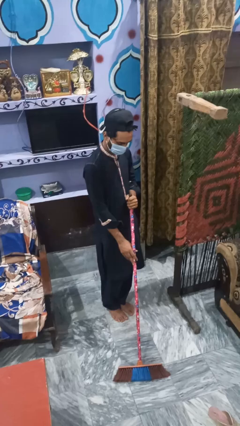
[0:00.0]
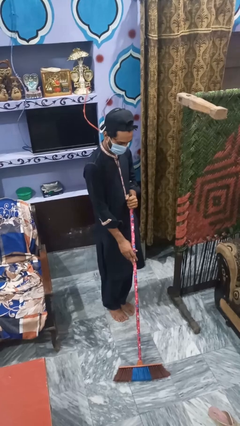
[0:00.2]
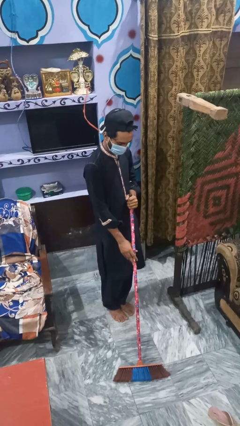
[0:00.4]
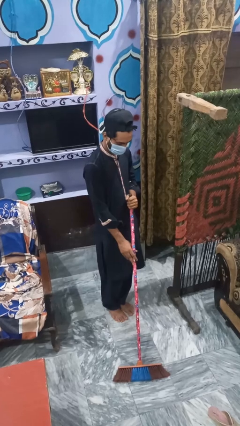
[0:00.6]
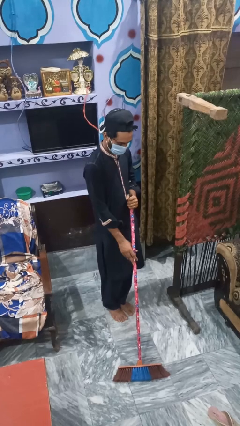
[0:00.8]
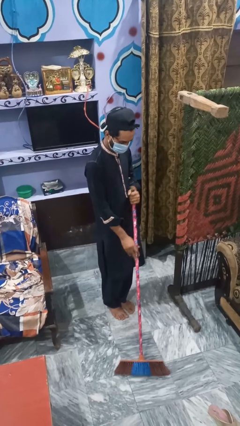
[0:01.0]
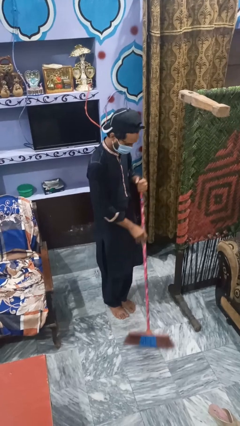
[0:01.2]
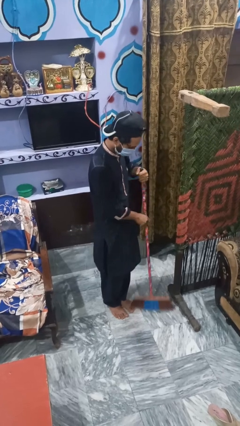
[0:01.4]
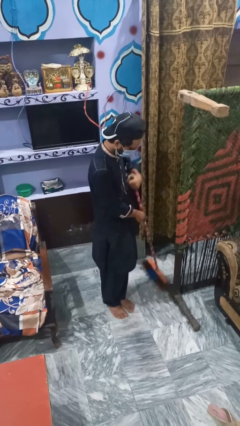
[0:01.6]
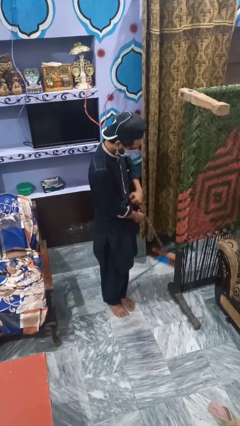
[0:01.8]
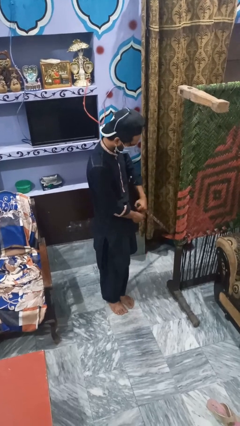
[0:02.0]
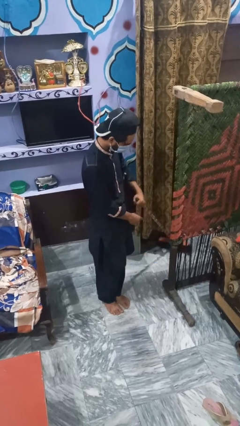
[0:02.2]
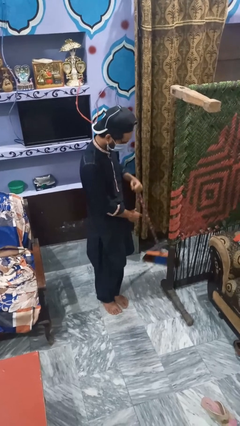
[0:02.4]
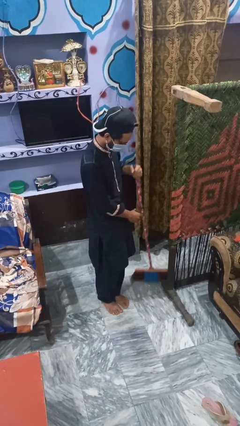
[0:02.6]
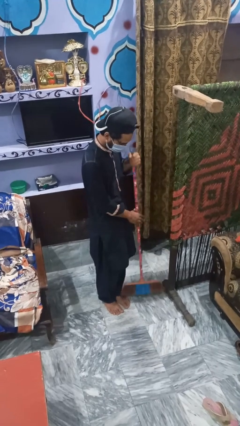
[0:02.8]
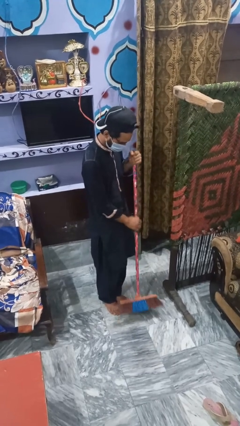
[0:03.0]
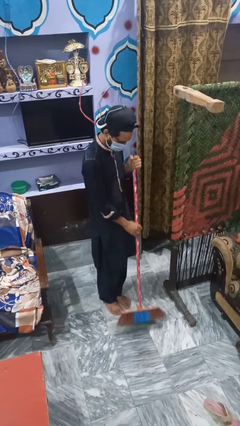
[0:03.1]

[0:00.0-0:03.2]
person mops

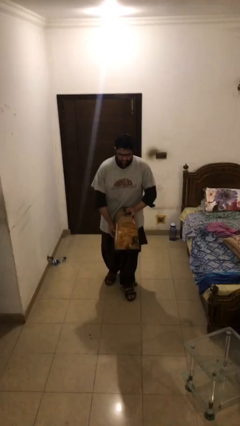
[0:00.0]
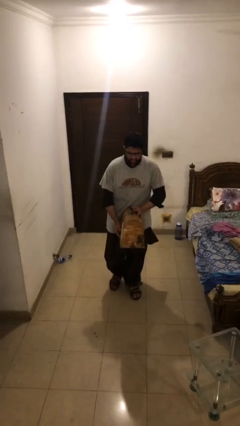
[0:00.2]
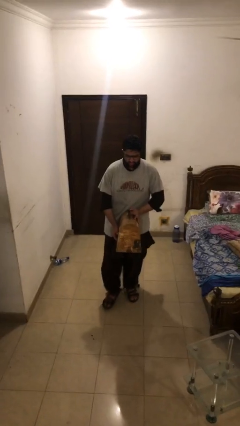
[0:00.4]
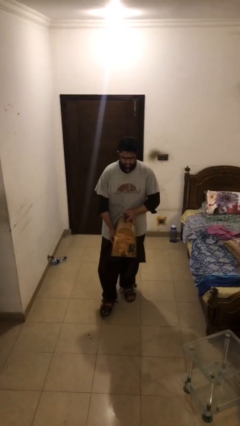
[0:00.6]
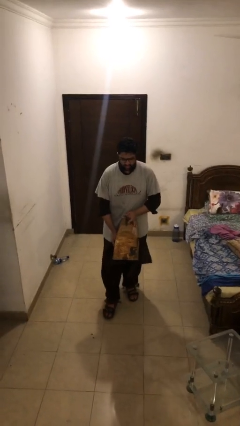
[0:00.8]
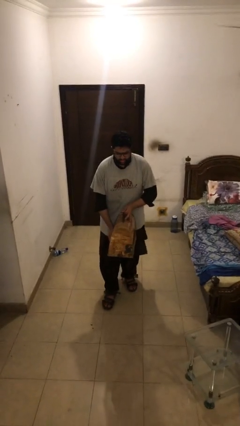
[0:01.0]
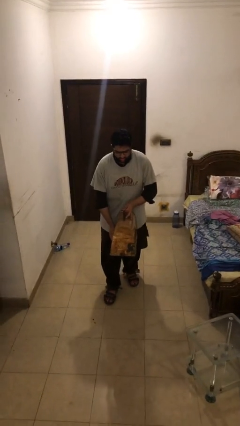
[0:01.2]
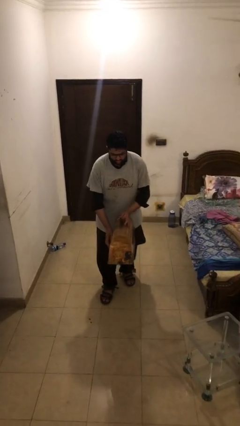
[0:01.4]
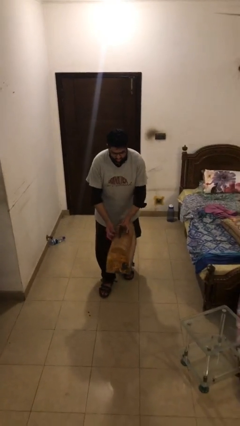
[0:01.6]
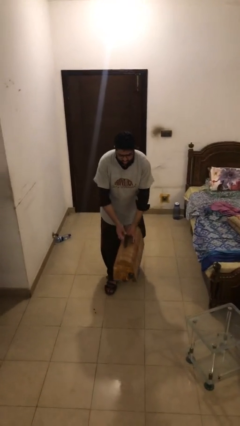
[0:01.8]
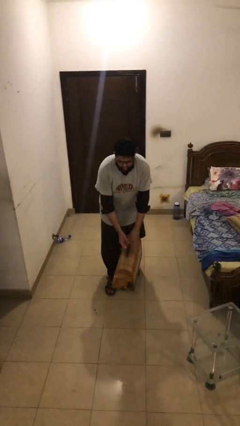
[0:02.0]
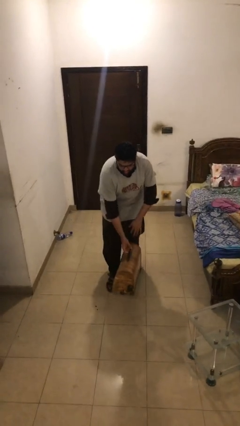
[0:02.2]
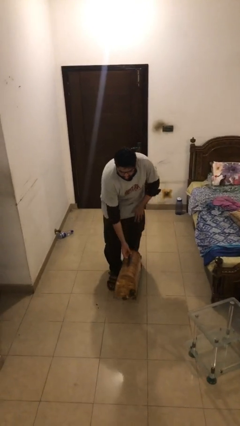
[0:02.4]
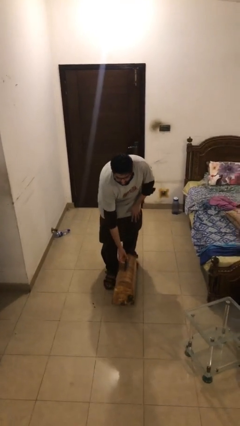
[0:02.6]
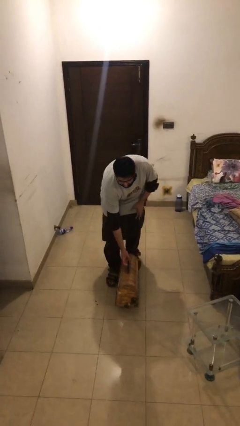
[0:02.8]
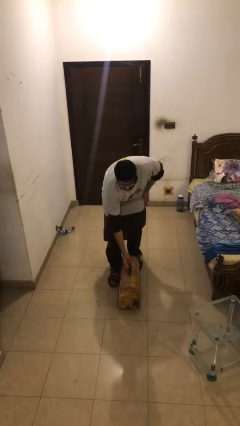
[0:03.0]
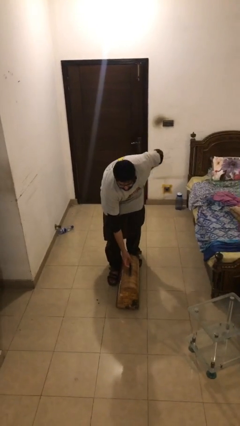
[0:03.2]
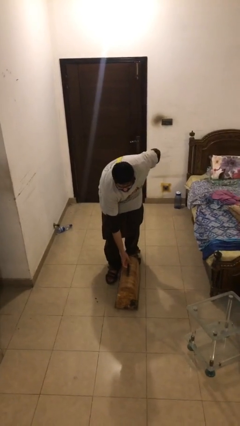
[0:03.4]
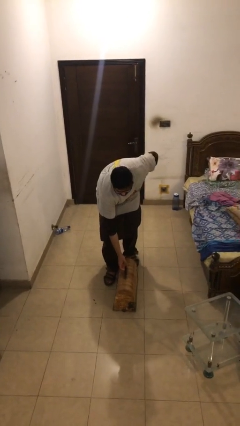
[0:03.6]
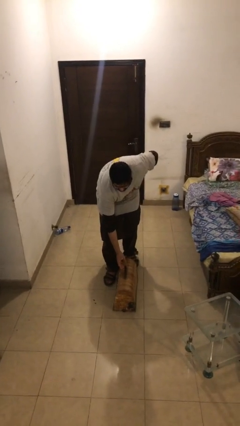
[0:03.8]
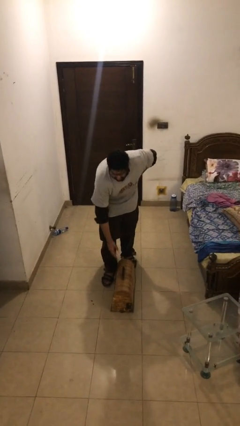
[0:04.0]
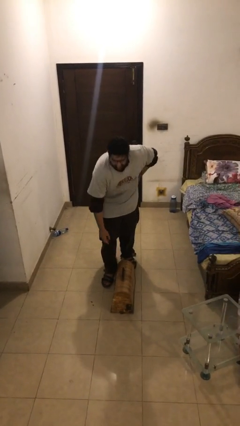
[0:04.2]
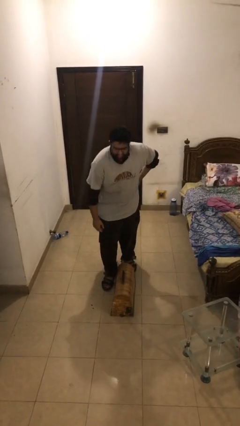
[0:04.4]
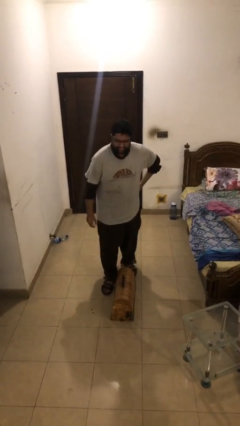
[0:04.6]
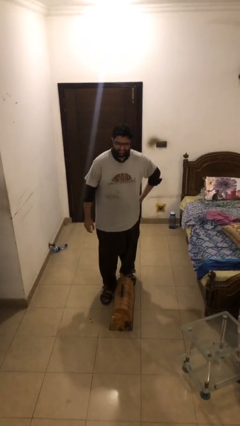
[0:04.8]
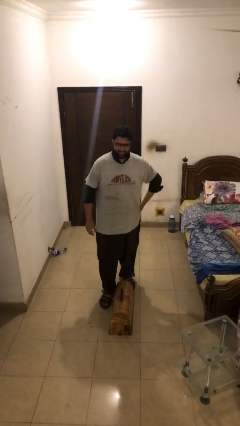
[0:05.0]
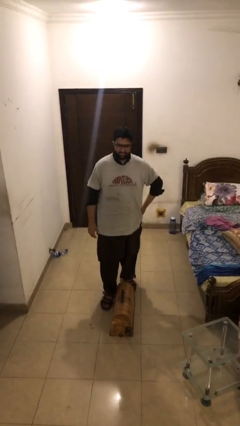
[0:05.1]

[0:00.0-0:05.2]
person puts down object on floor

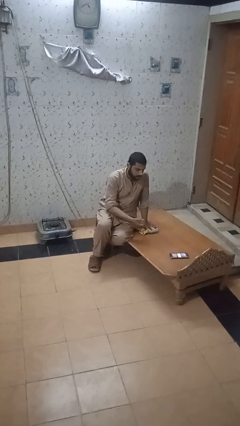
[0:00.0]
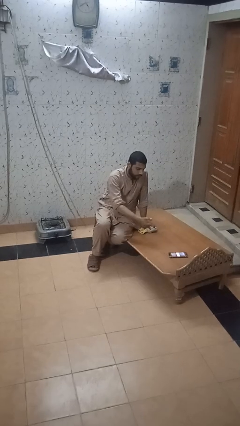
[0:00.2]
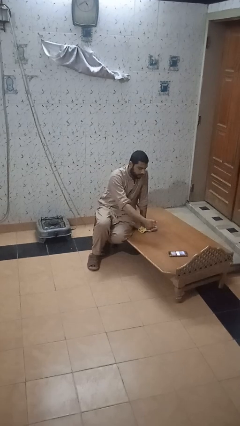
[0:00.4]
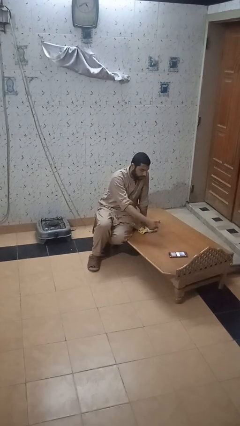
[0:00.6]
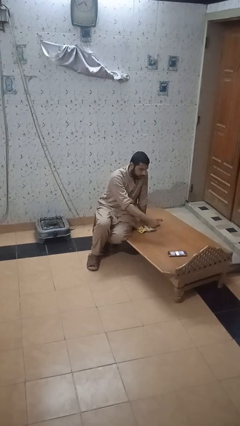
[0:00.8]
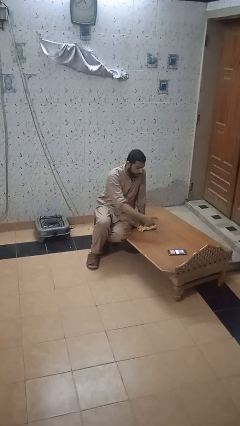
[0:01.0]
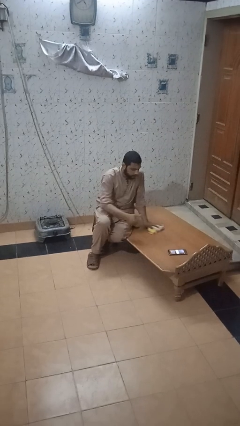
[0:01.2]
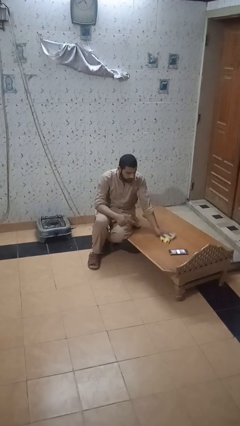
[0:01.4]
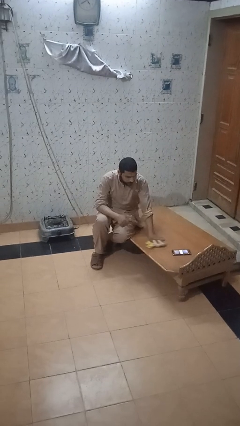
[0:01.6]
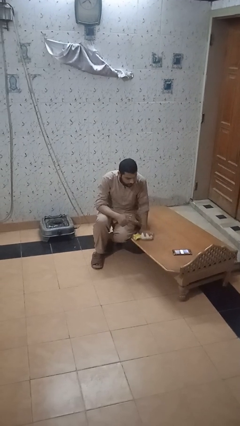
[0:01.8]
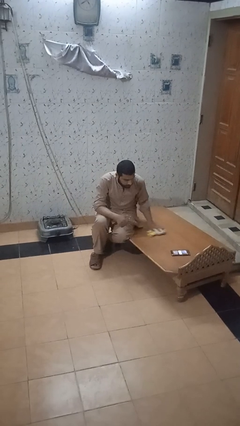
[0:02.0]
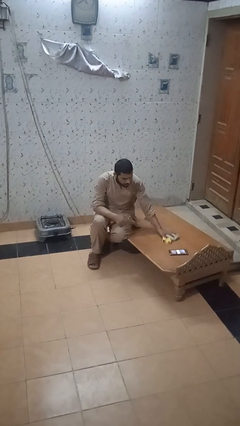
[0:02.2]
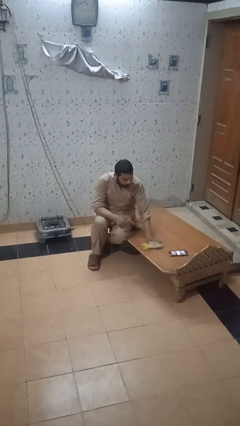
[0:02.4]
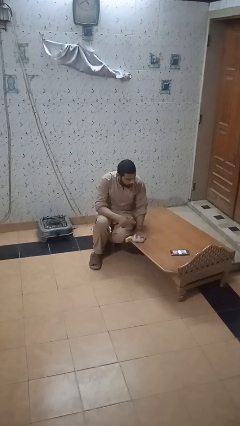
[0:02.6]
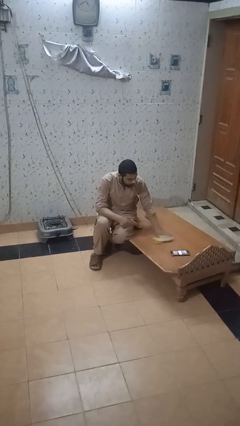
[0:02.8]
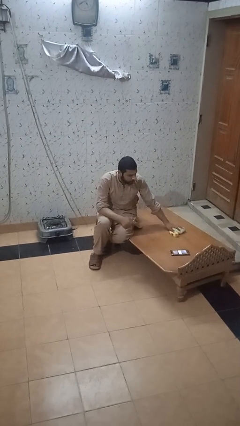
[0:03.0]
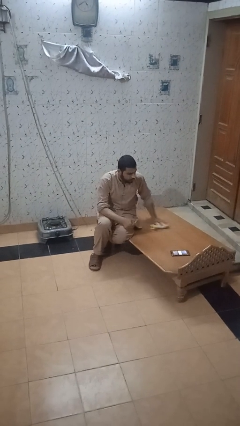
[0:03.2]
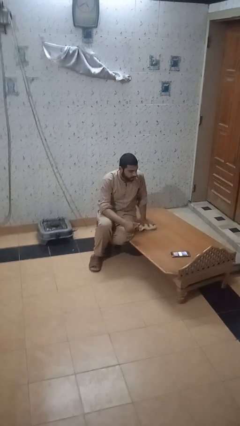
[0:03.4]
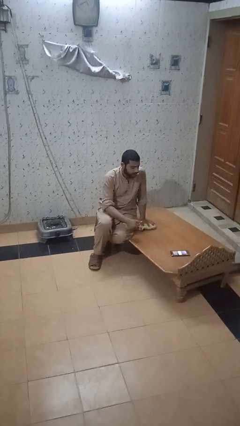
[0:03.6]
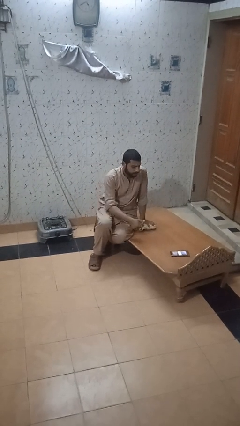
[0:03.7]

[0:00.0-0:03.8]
person sprays from bottle

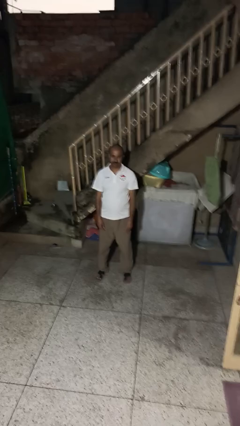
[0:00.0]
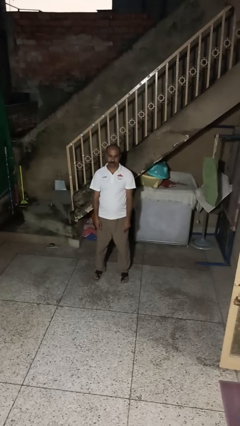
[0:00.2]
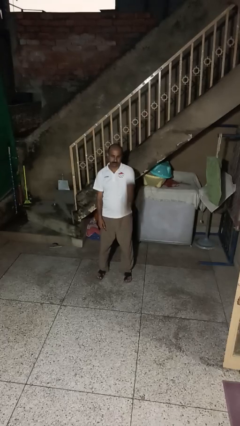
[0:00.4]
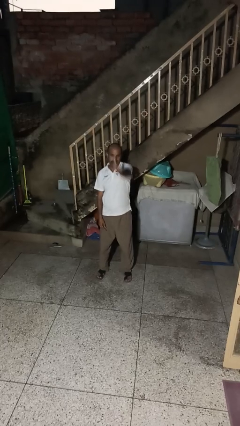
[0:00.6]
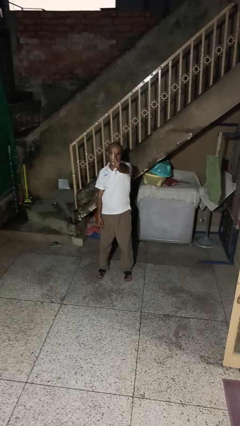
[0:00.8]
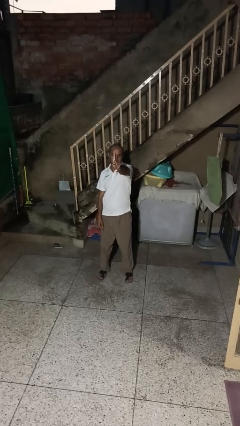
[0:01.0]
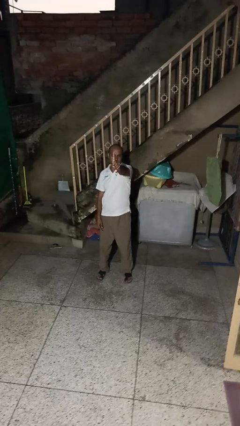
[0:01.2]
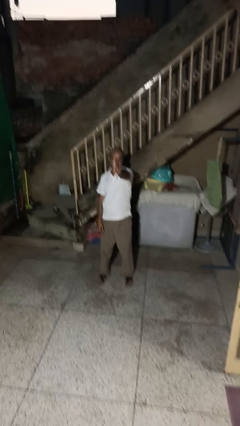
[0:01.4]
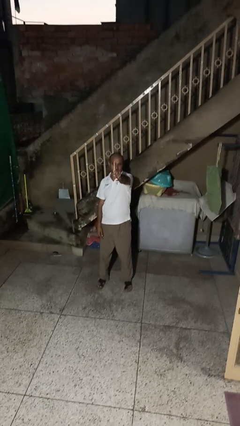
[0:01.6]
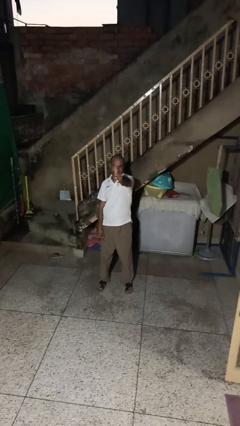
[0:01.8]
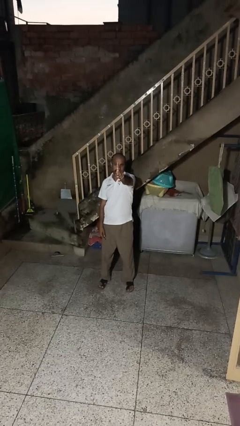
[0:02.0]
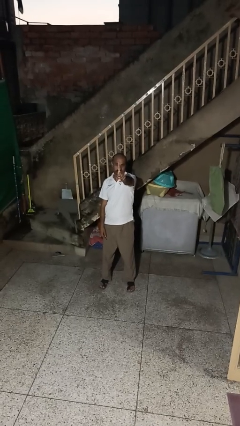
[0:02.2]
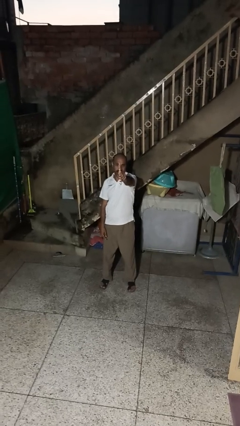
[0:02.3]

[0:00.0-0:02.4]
person gestures number one

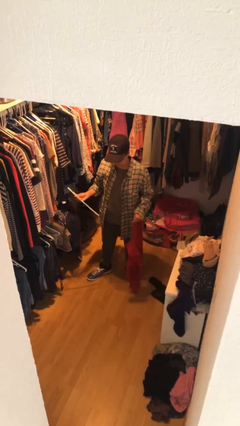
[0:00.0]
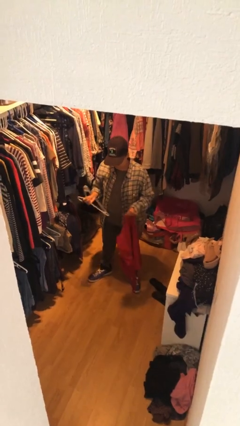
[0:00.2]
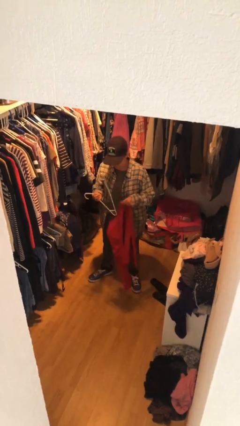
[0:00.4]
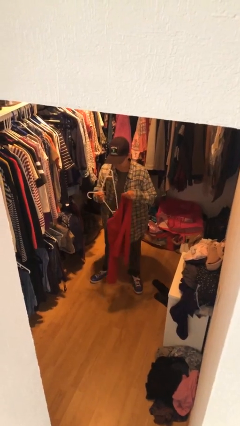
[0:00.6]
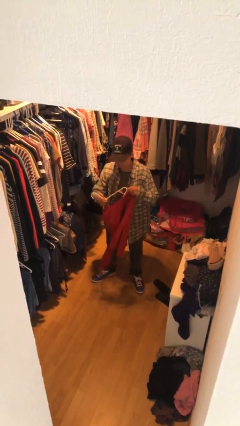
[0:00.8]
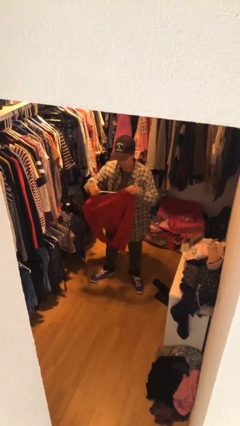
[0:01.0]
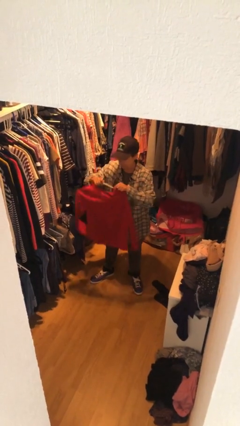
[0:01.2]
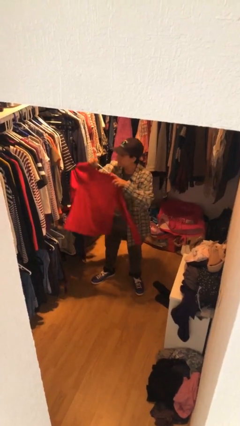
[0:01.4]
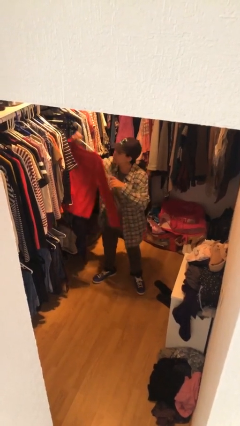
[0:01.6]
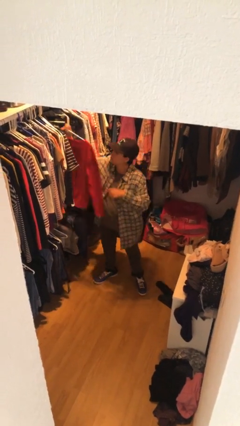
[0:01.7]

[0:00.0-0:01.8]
person puts clothes into closet

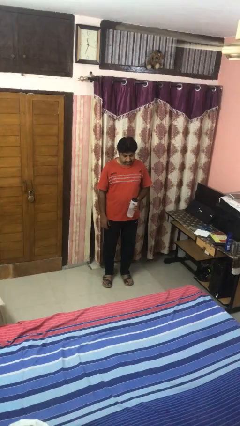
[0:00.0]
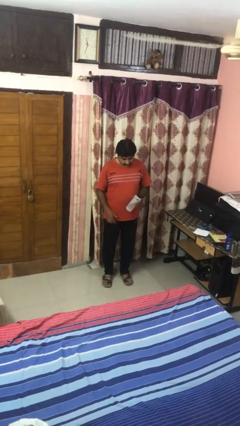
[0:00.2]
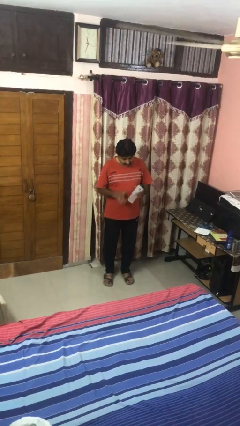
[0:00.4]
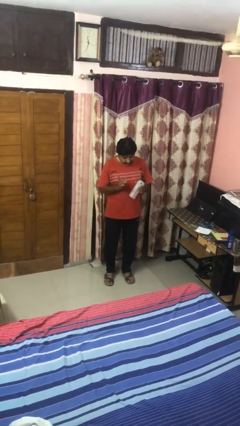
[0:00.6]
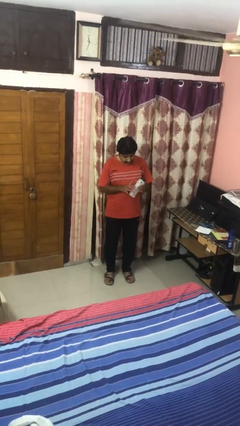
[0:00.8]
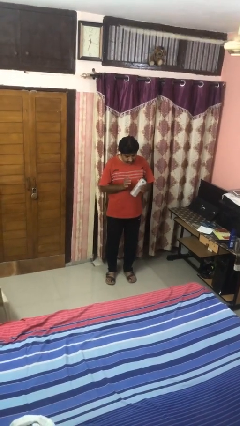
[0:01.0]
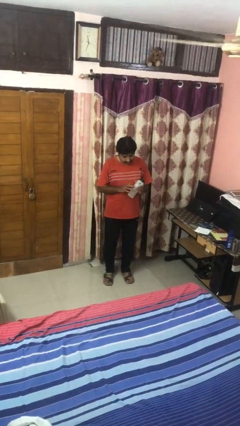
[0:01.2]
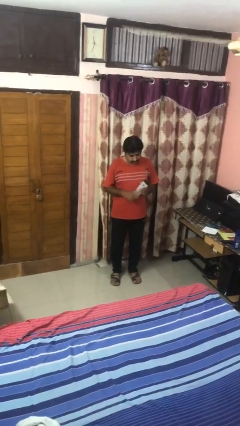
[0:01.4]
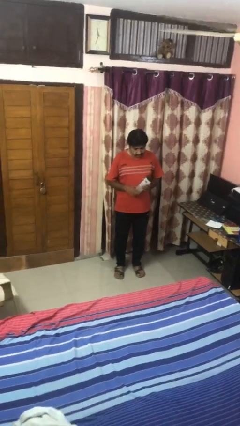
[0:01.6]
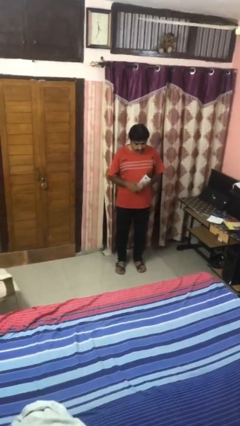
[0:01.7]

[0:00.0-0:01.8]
person taps object with finger
